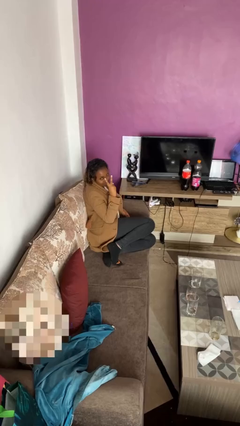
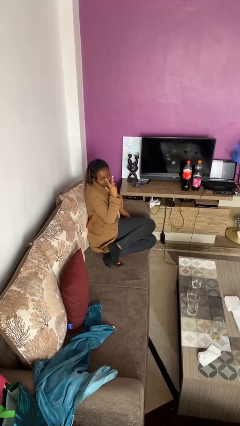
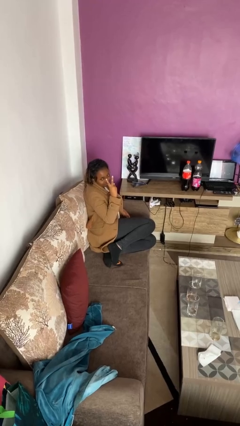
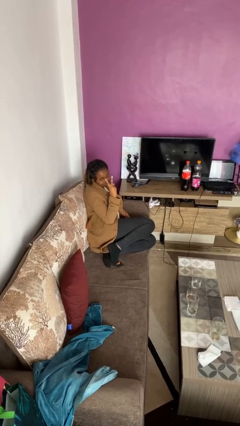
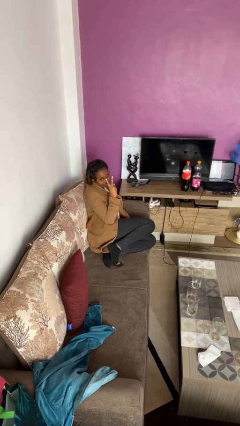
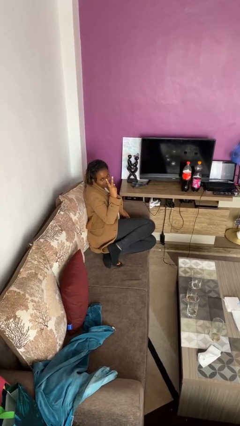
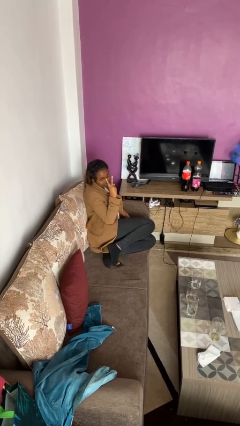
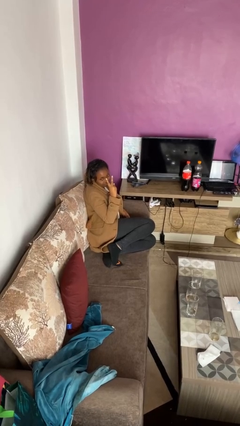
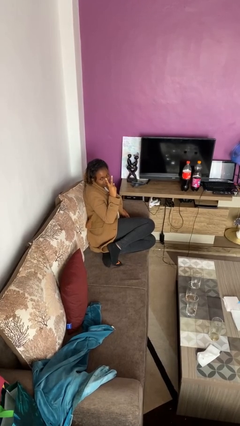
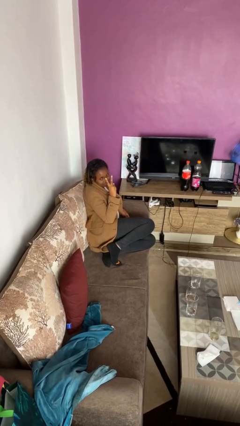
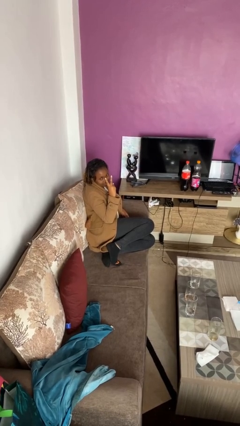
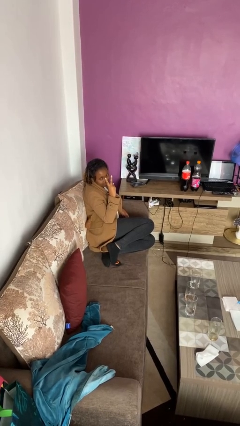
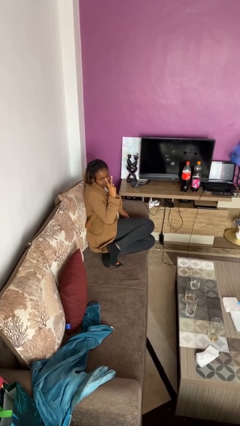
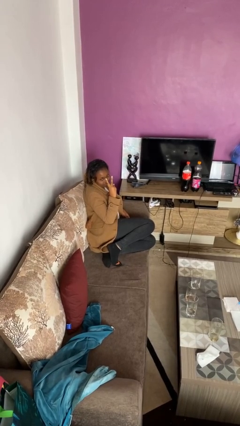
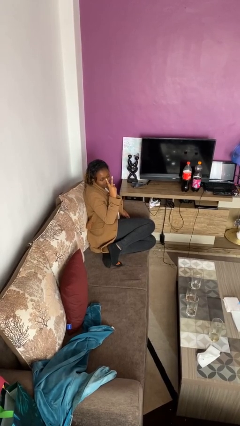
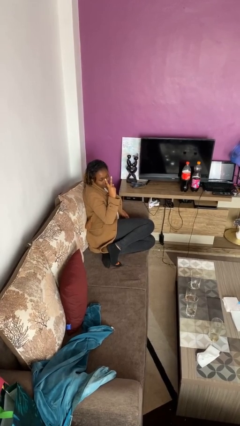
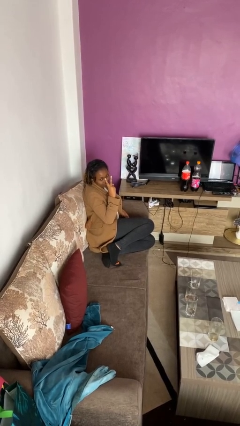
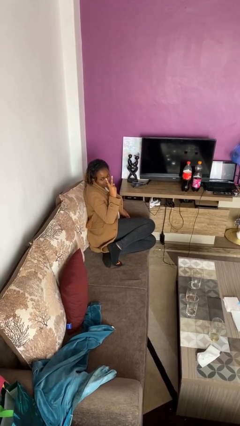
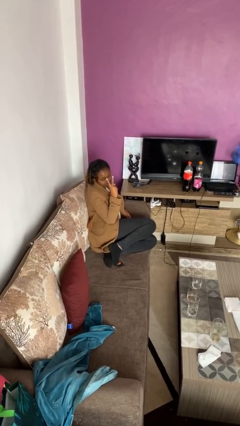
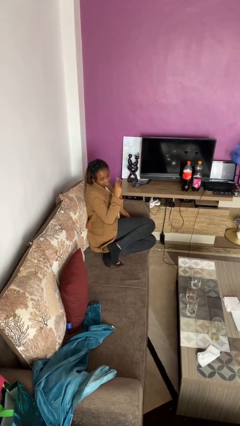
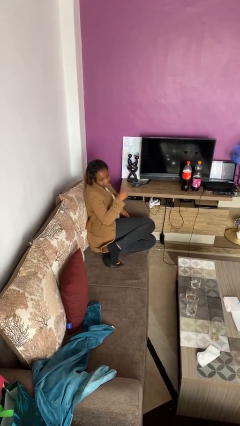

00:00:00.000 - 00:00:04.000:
person gestures peace

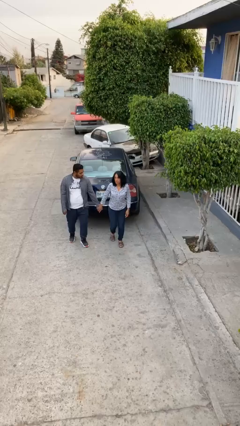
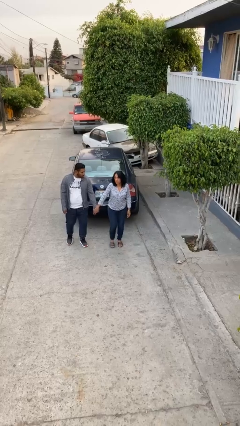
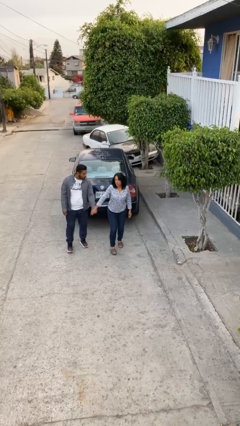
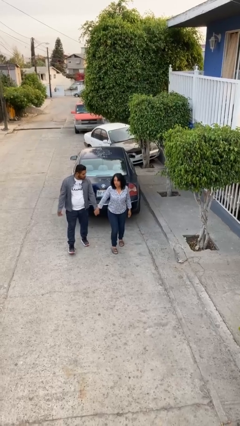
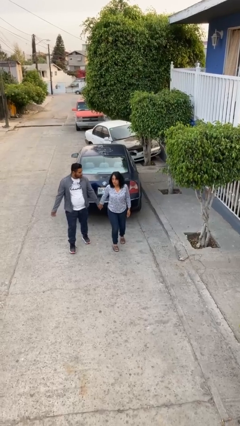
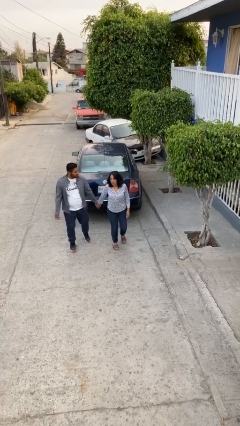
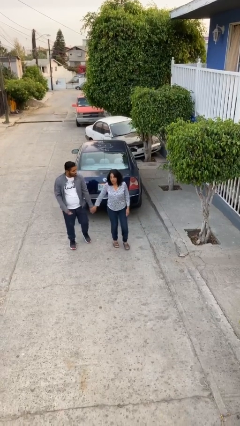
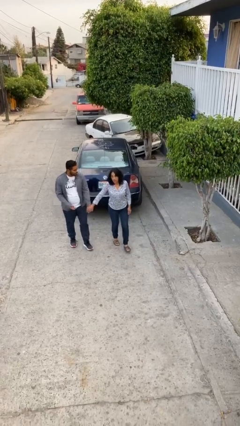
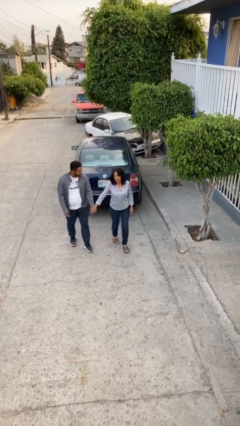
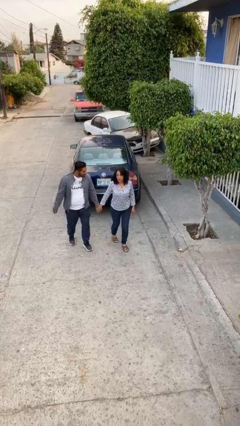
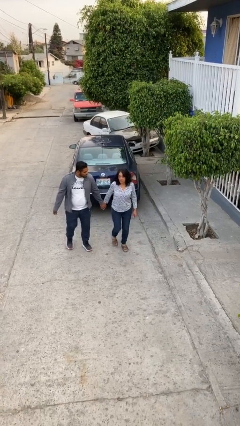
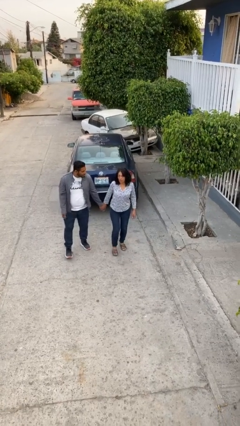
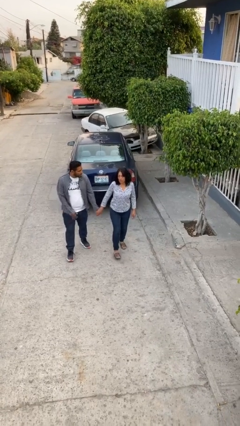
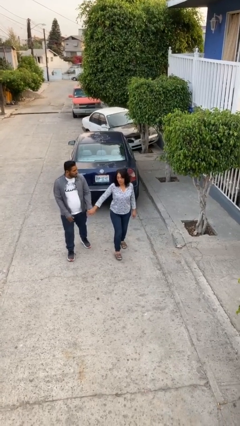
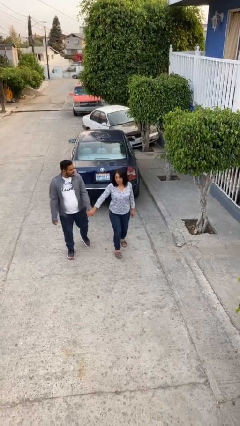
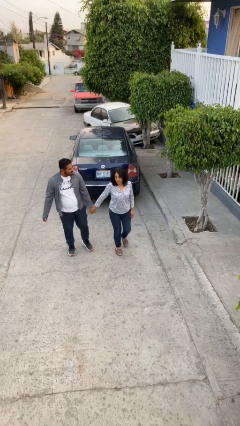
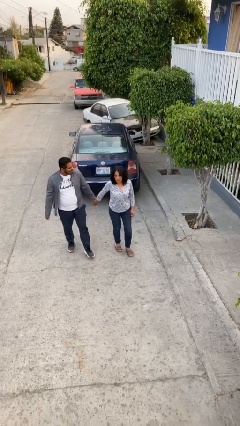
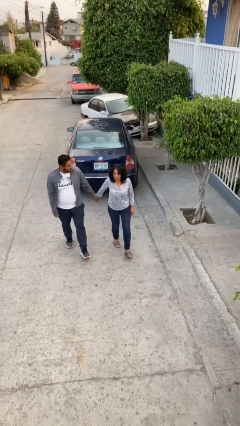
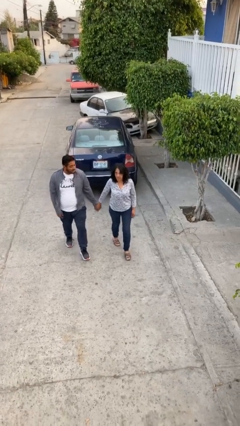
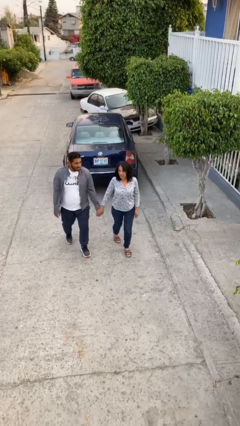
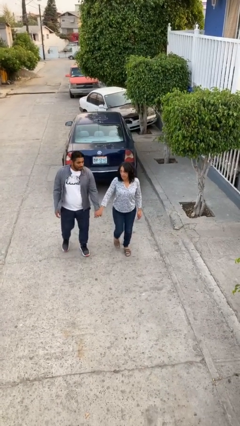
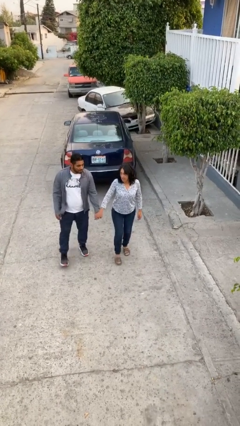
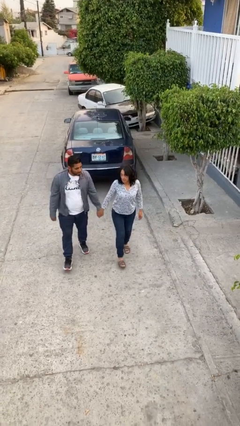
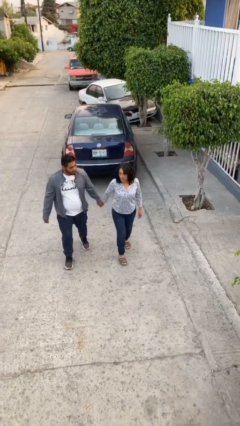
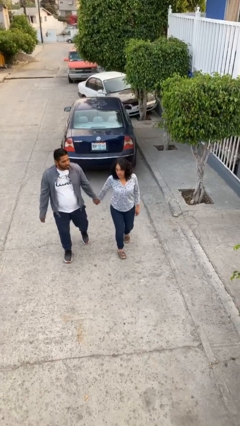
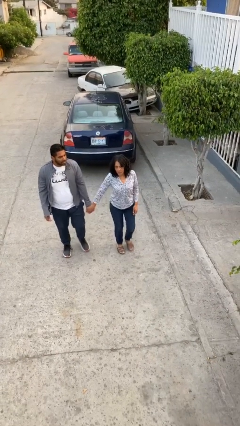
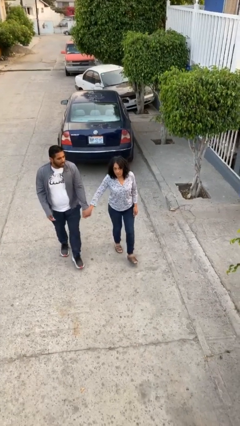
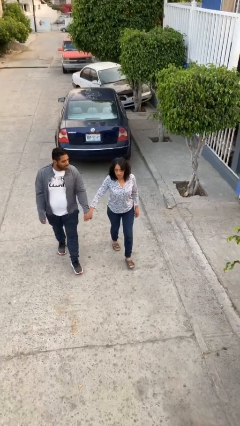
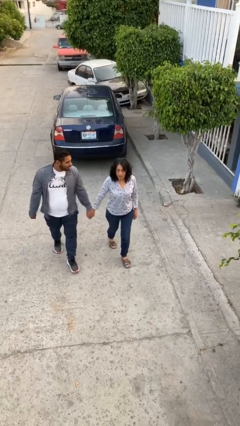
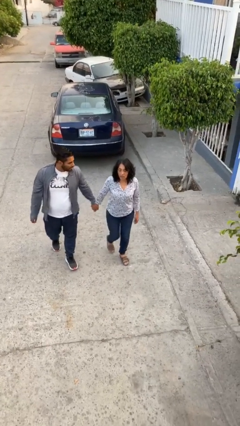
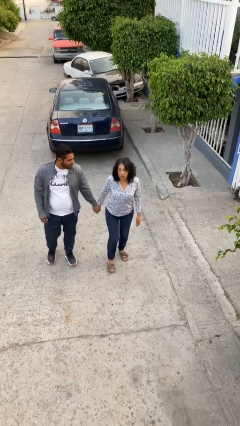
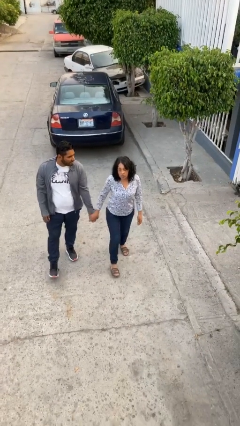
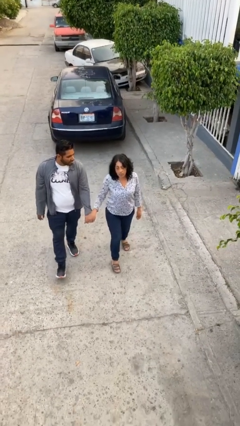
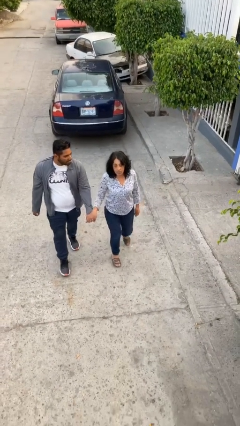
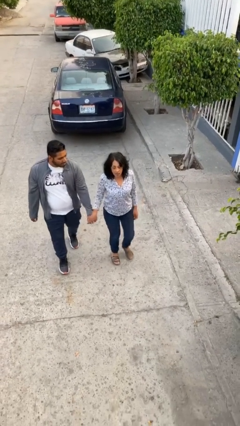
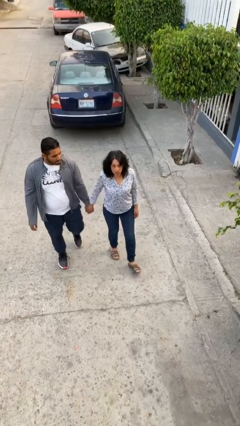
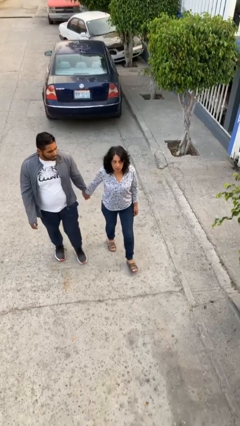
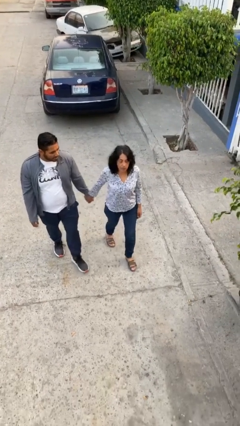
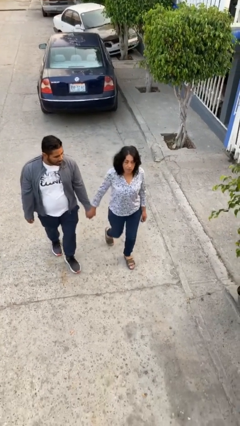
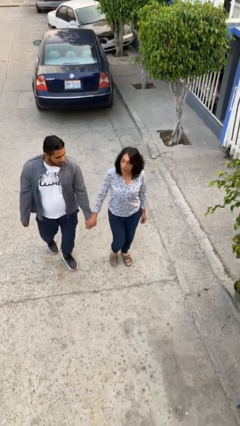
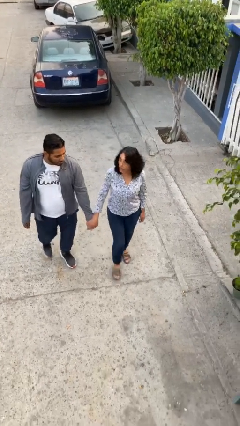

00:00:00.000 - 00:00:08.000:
person holds hand

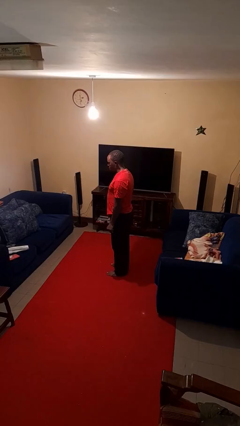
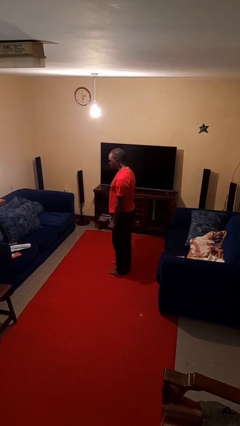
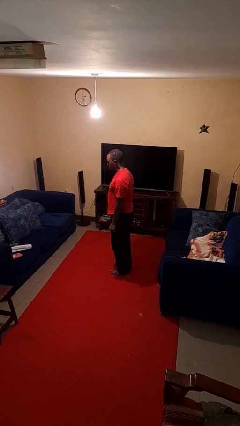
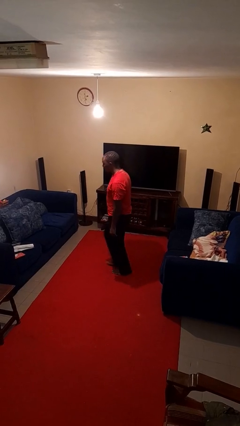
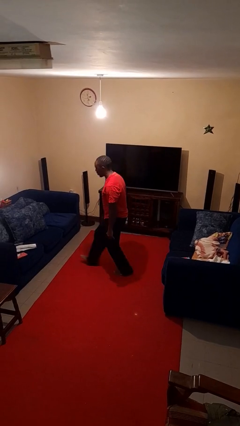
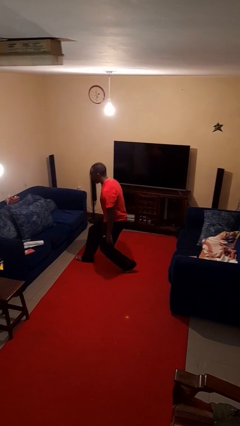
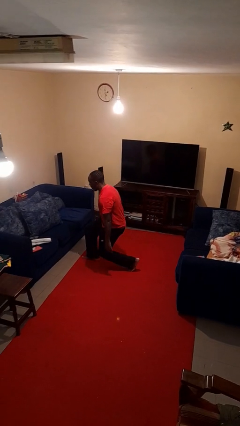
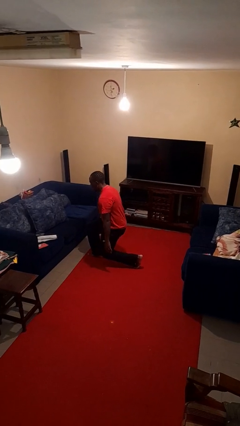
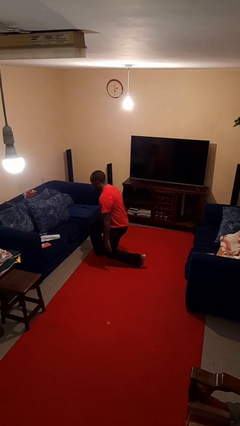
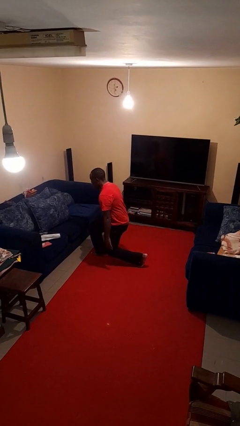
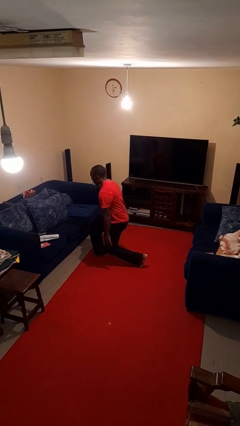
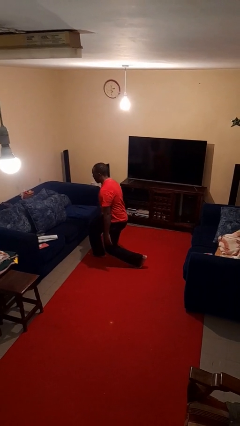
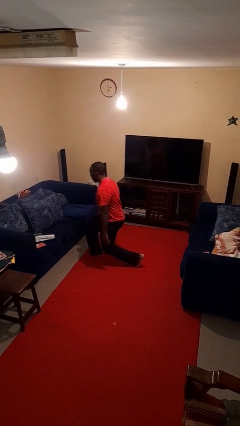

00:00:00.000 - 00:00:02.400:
person exercises with lunges

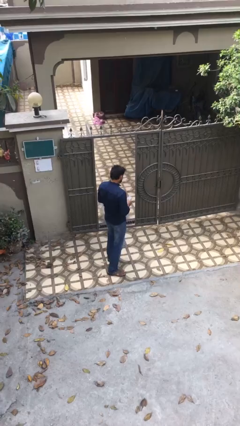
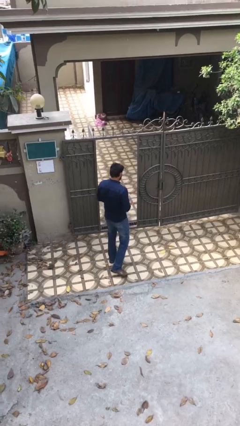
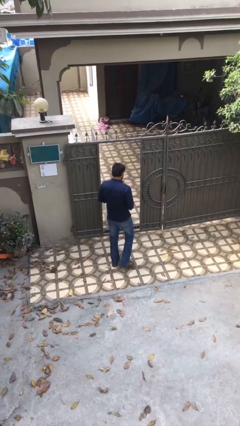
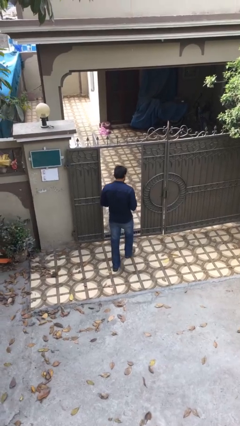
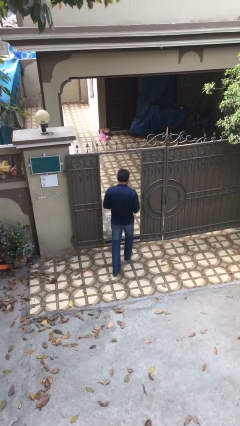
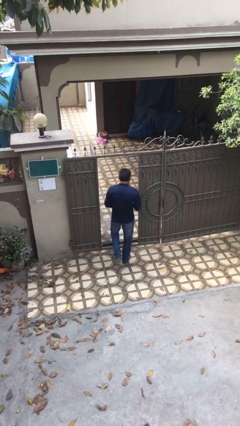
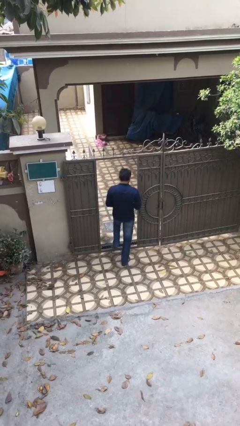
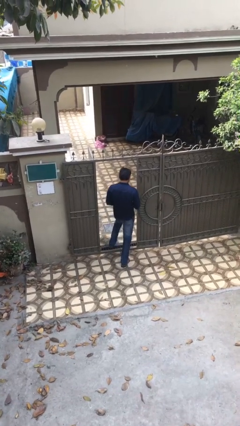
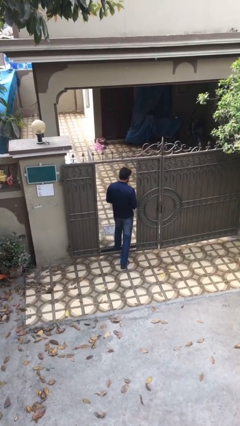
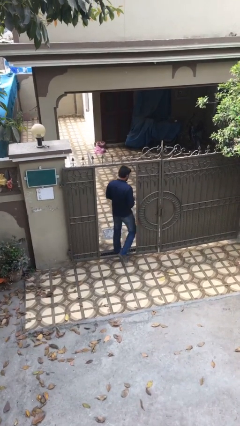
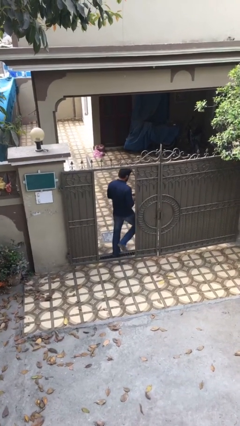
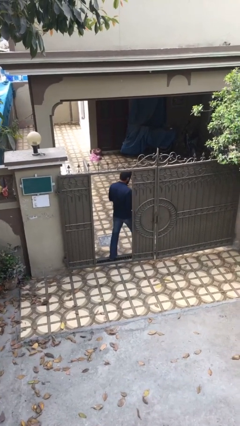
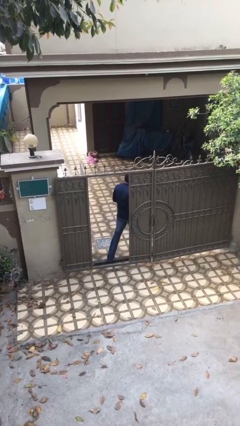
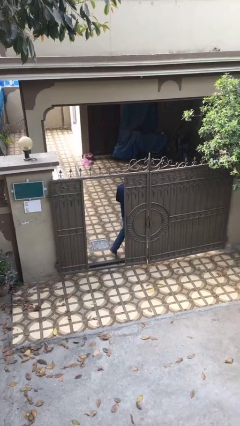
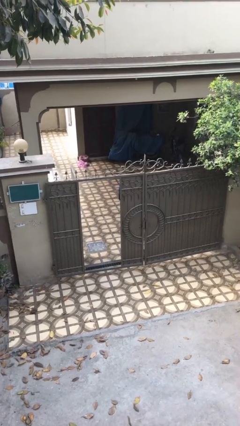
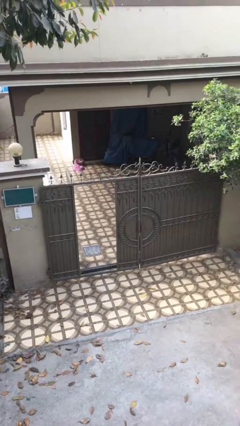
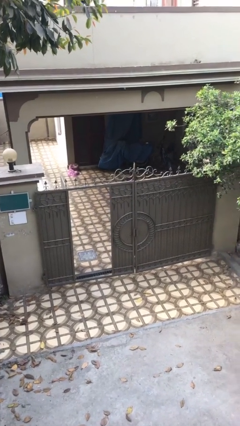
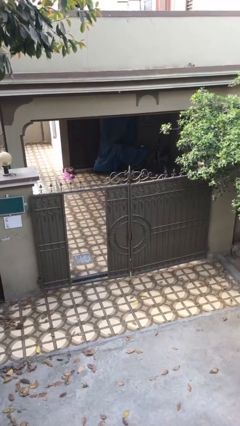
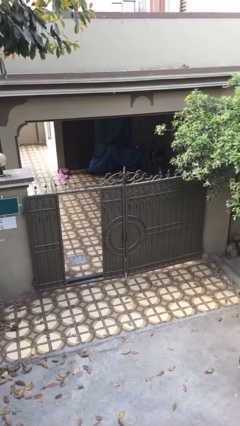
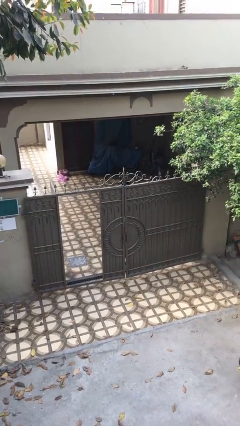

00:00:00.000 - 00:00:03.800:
person exits scene through structure
